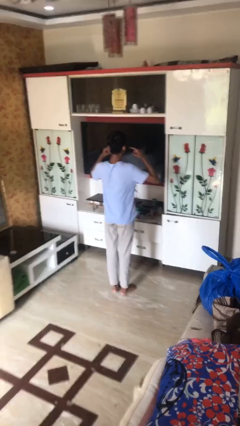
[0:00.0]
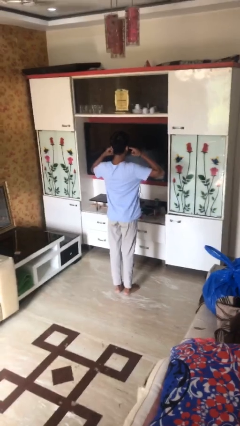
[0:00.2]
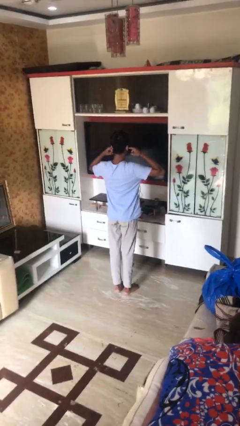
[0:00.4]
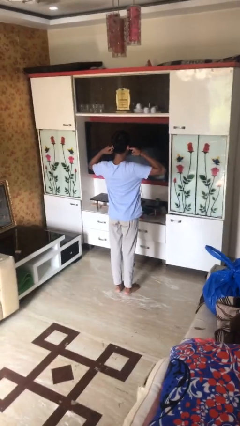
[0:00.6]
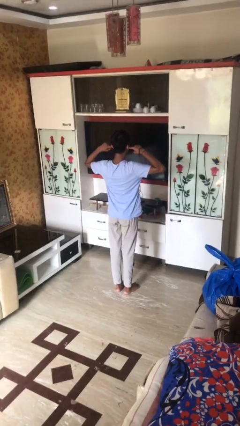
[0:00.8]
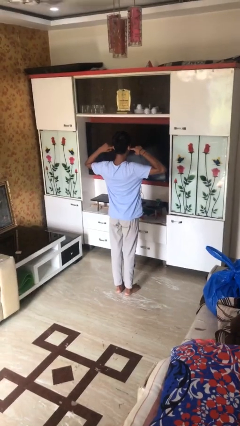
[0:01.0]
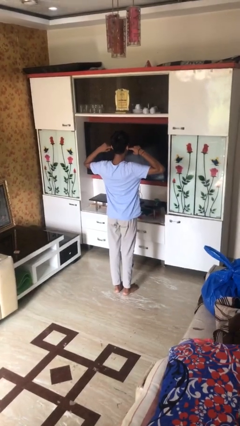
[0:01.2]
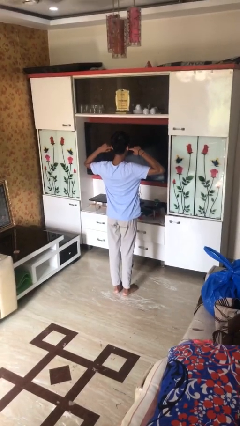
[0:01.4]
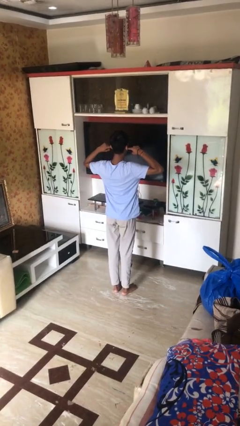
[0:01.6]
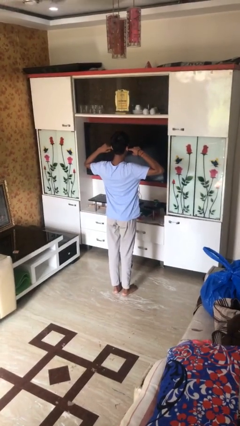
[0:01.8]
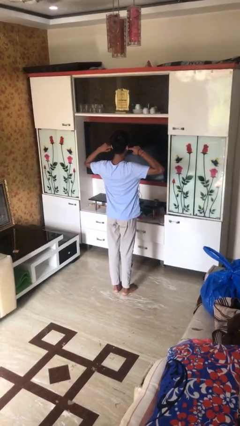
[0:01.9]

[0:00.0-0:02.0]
person puts fingers in ear

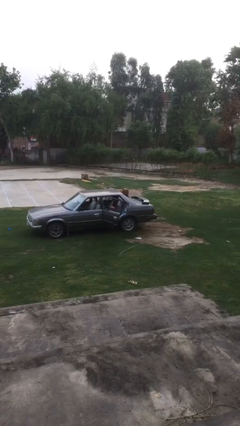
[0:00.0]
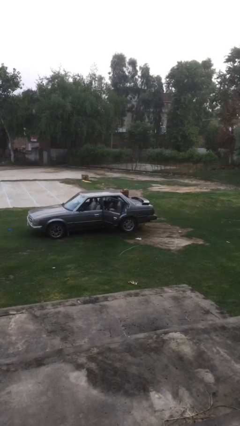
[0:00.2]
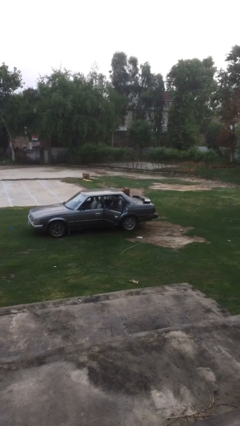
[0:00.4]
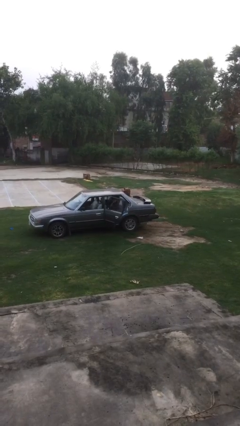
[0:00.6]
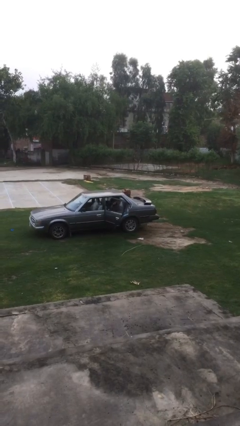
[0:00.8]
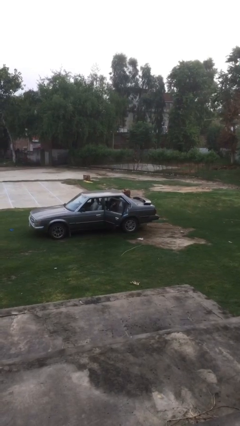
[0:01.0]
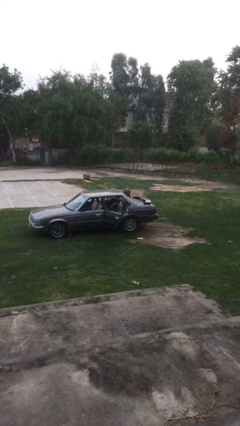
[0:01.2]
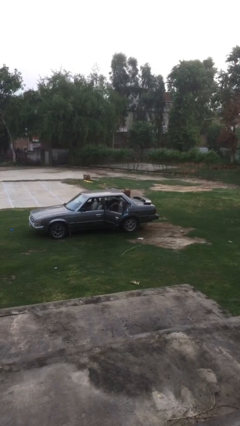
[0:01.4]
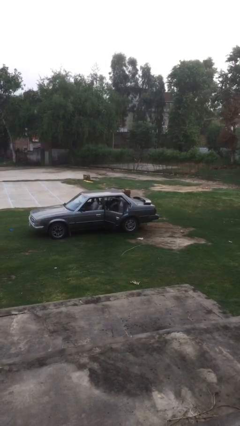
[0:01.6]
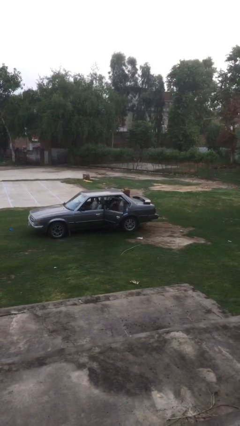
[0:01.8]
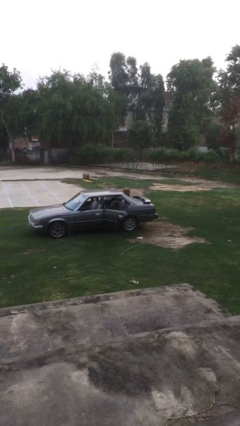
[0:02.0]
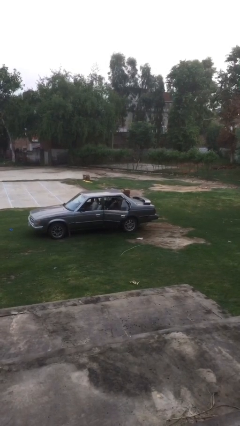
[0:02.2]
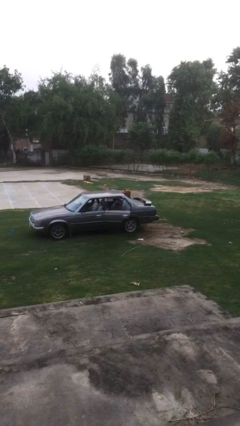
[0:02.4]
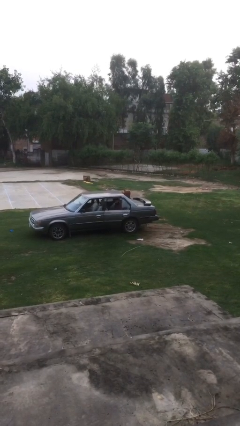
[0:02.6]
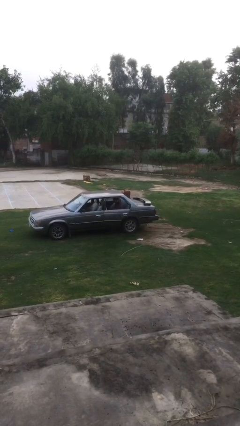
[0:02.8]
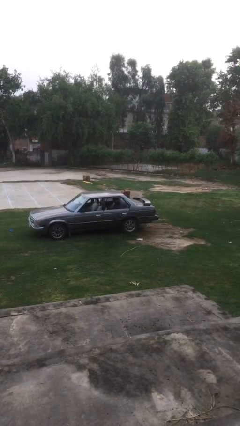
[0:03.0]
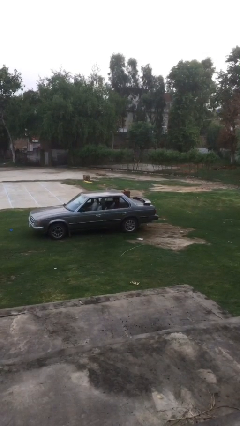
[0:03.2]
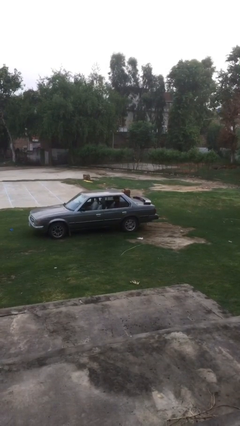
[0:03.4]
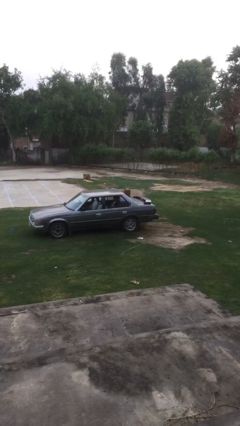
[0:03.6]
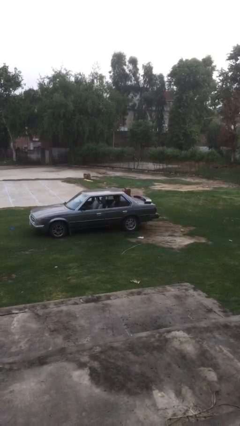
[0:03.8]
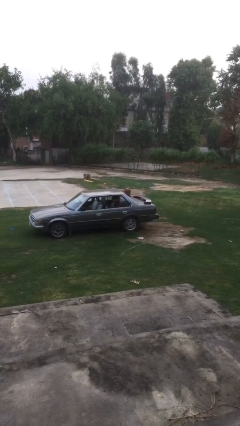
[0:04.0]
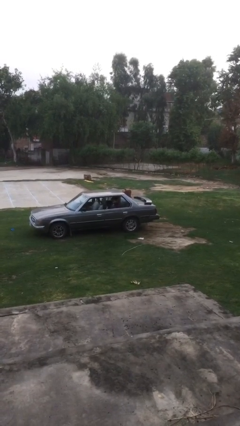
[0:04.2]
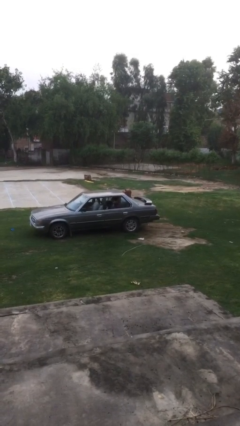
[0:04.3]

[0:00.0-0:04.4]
person closes car door

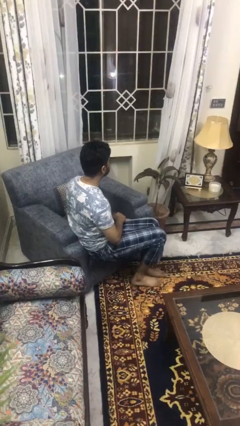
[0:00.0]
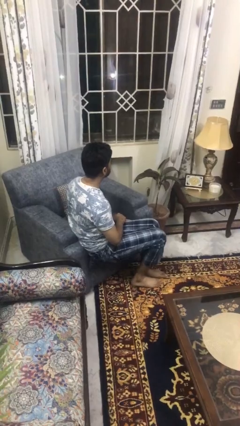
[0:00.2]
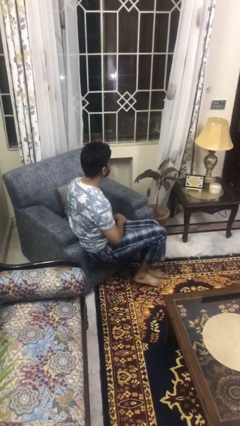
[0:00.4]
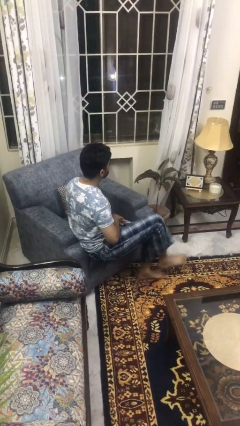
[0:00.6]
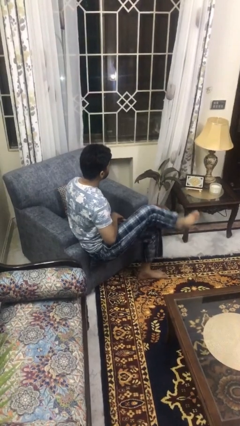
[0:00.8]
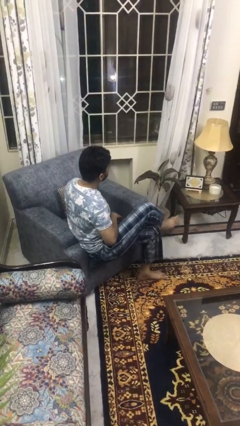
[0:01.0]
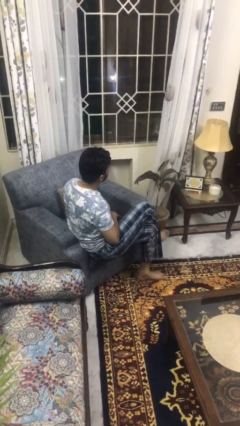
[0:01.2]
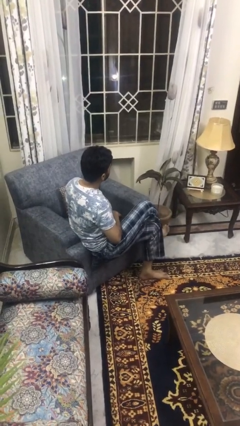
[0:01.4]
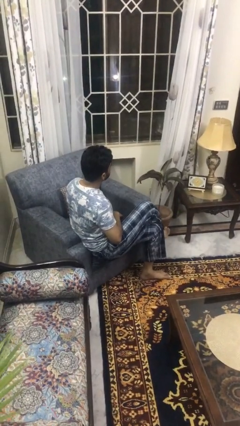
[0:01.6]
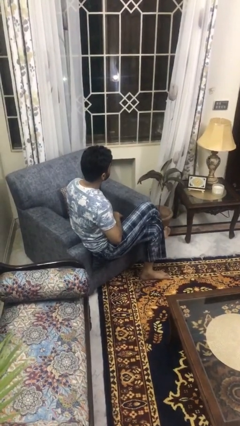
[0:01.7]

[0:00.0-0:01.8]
person crosses legs

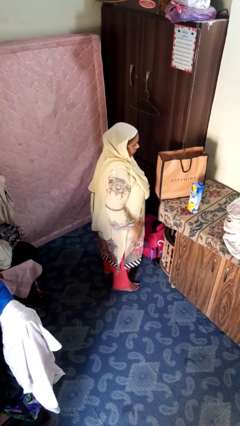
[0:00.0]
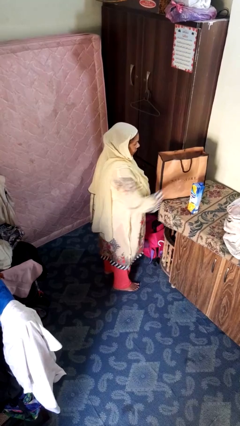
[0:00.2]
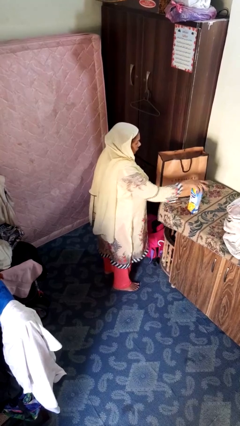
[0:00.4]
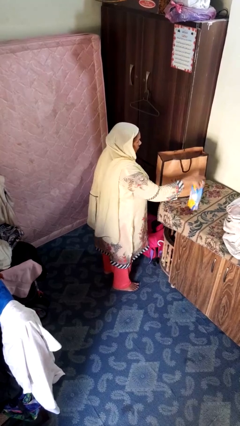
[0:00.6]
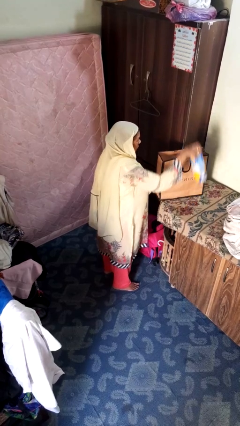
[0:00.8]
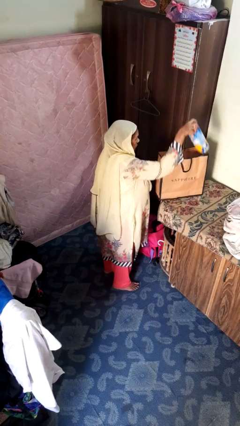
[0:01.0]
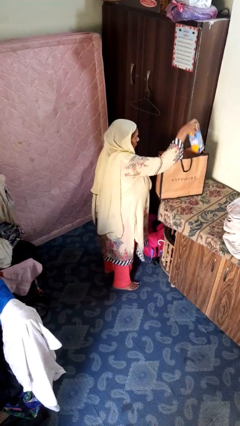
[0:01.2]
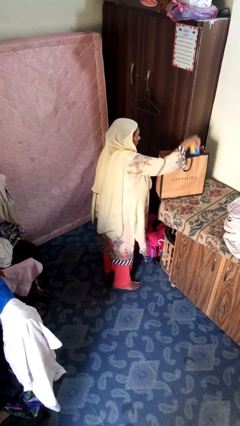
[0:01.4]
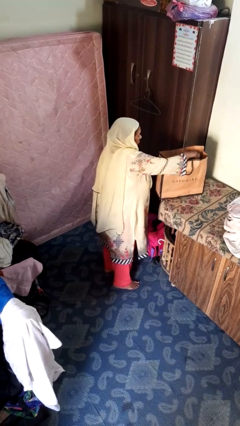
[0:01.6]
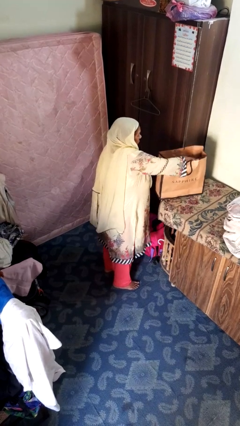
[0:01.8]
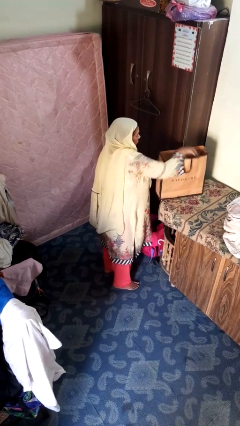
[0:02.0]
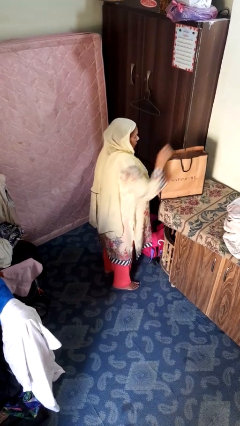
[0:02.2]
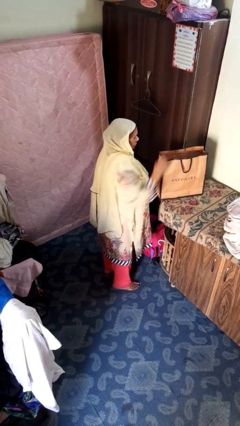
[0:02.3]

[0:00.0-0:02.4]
person puts object into bag

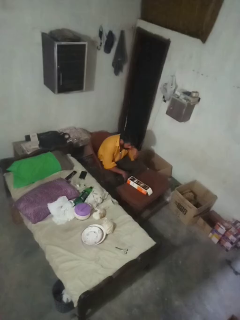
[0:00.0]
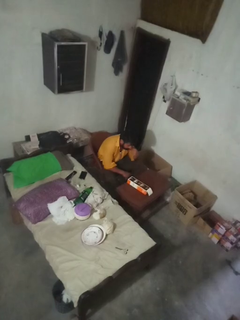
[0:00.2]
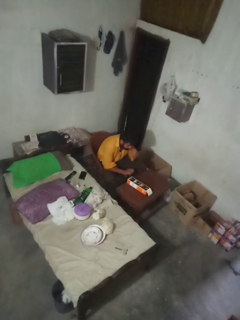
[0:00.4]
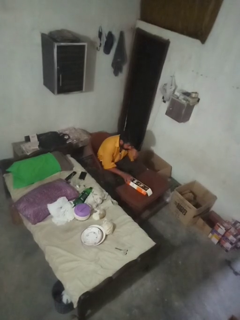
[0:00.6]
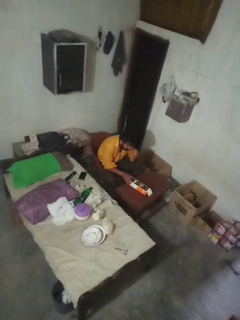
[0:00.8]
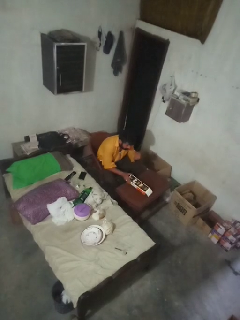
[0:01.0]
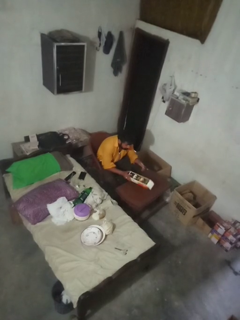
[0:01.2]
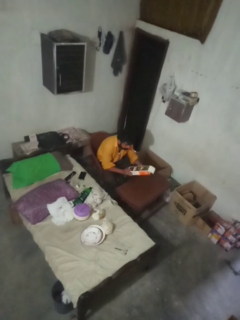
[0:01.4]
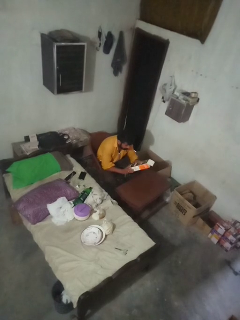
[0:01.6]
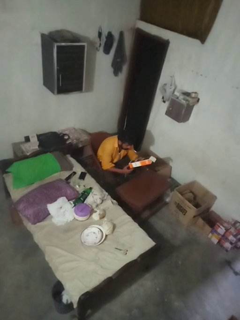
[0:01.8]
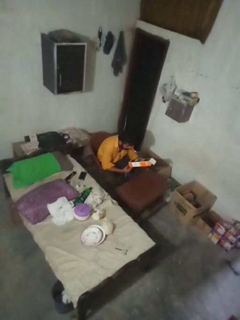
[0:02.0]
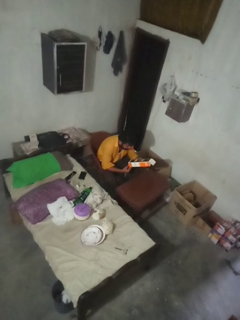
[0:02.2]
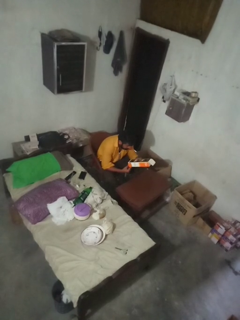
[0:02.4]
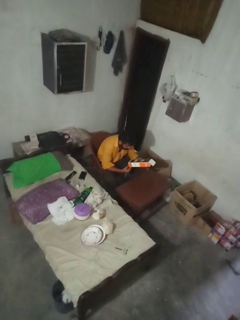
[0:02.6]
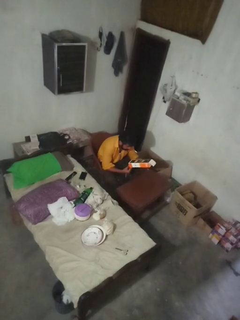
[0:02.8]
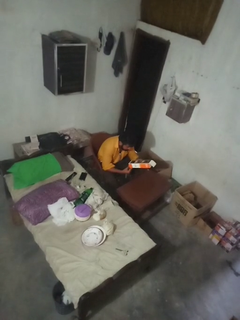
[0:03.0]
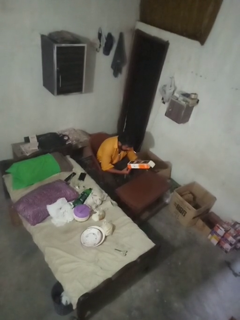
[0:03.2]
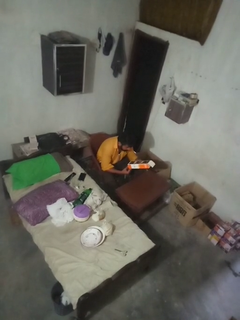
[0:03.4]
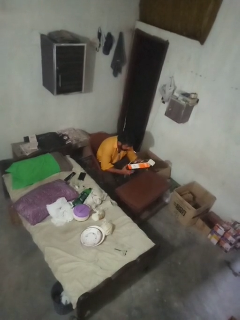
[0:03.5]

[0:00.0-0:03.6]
person picks up object from countertop

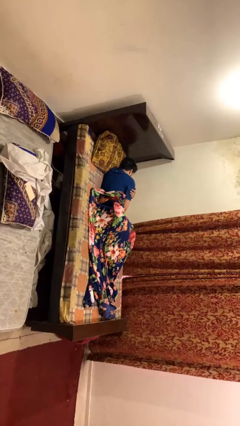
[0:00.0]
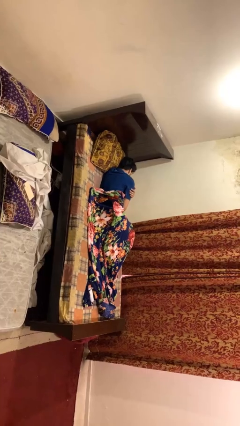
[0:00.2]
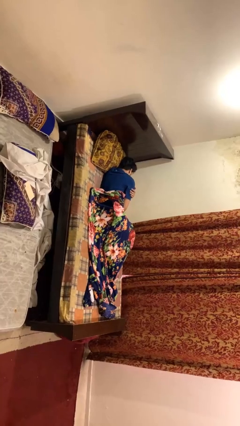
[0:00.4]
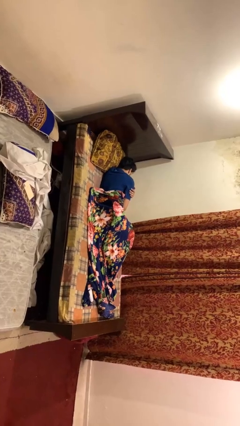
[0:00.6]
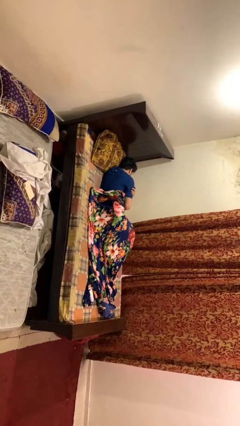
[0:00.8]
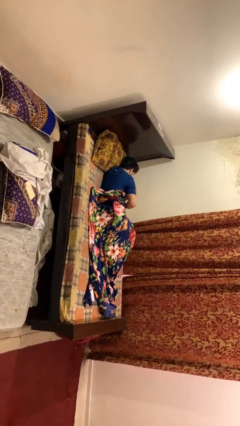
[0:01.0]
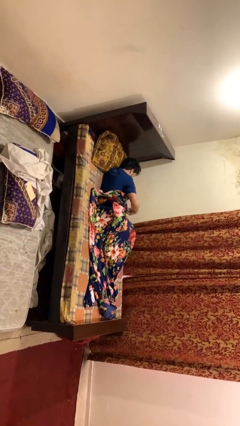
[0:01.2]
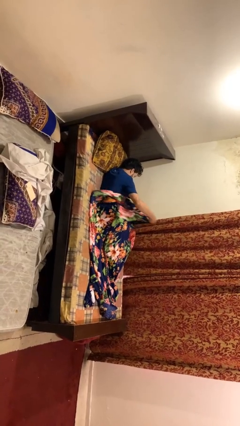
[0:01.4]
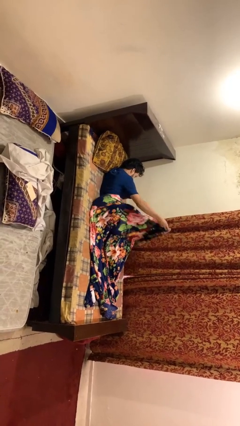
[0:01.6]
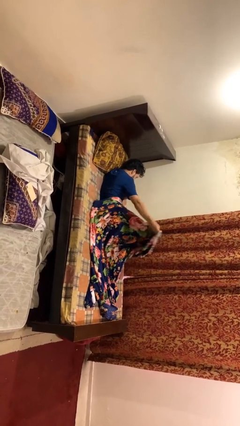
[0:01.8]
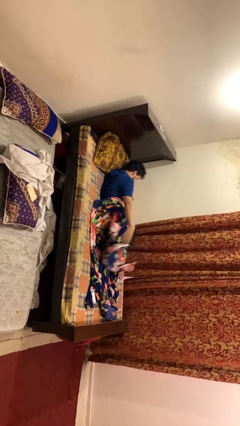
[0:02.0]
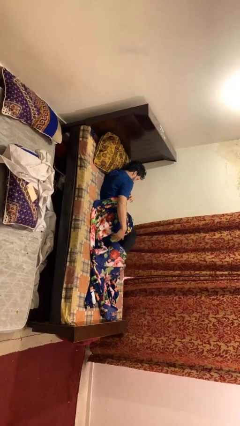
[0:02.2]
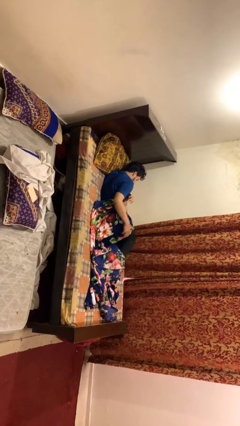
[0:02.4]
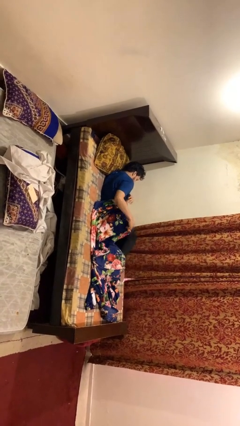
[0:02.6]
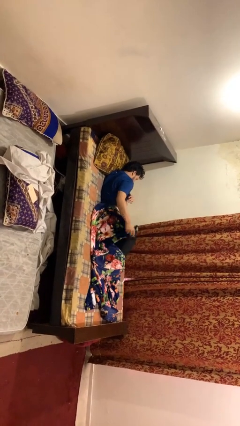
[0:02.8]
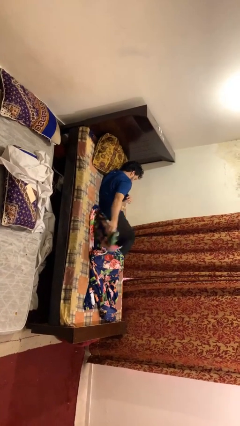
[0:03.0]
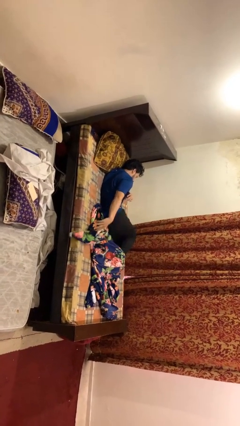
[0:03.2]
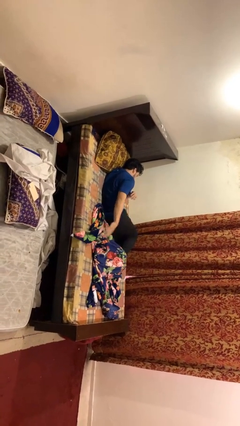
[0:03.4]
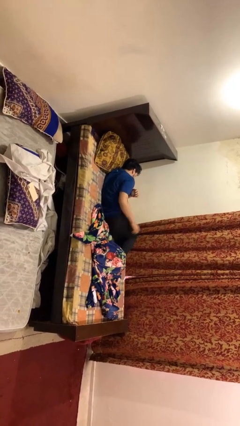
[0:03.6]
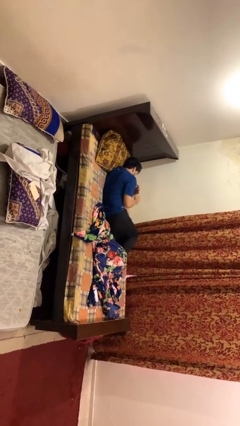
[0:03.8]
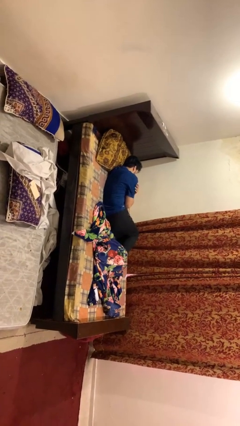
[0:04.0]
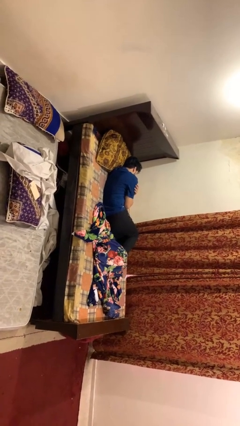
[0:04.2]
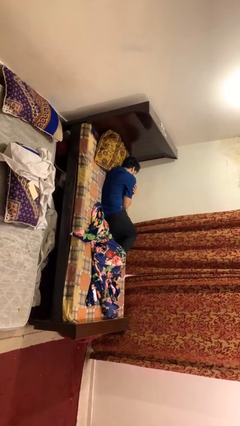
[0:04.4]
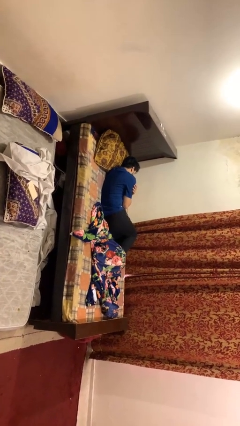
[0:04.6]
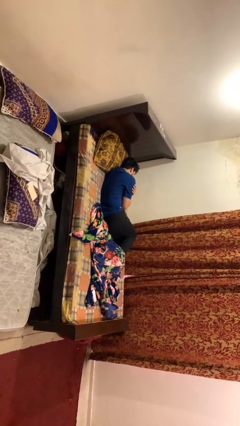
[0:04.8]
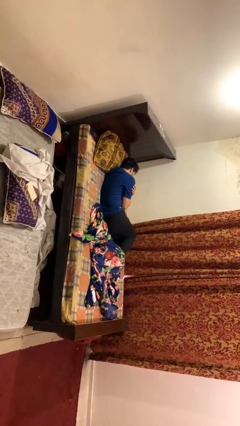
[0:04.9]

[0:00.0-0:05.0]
person uncovers with blanket
